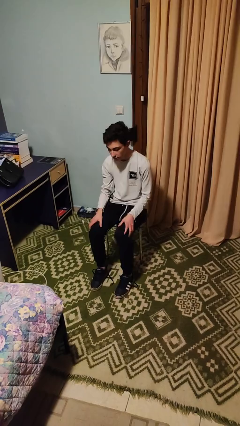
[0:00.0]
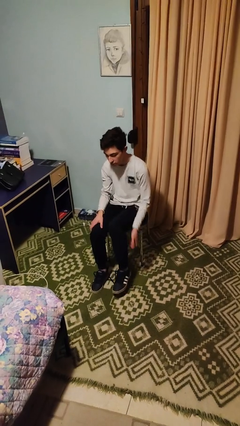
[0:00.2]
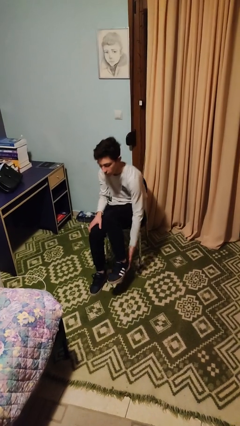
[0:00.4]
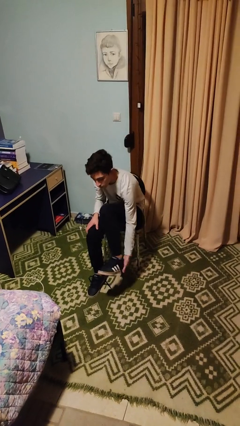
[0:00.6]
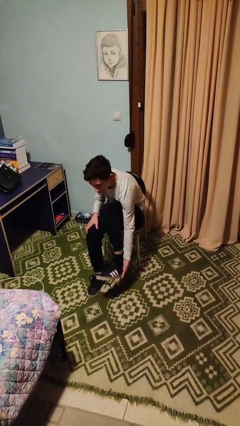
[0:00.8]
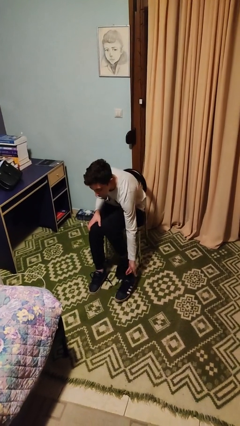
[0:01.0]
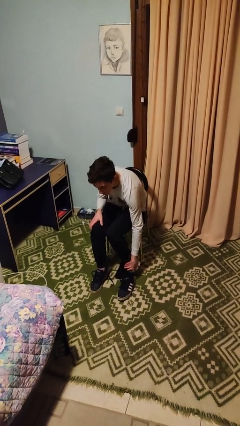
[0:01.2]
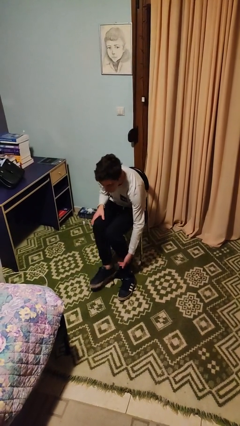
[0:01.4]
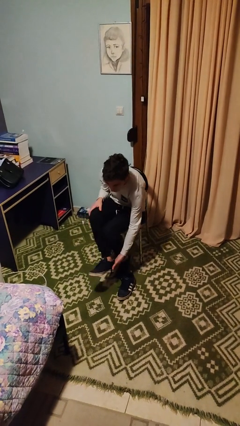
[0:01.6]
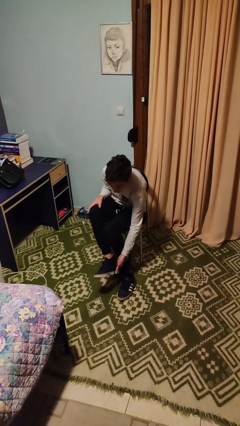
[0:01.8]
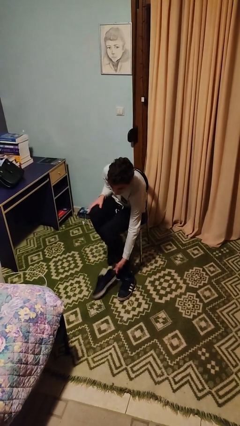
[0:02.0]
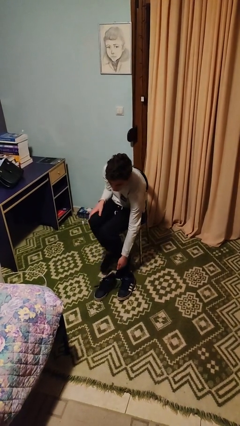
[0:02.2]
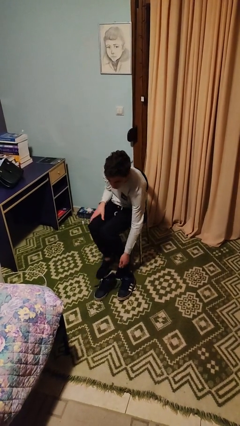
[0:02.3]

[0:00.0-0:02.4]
person takes off shoes

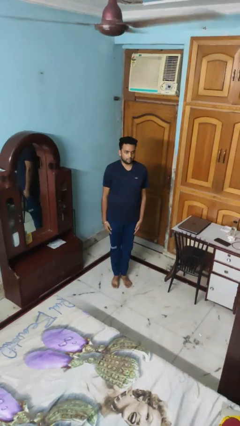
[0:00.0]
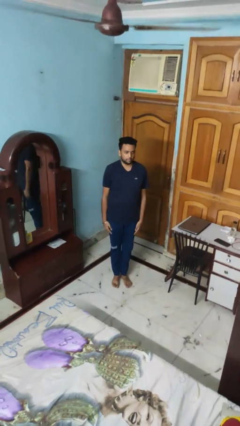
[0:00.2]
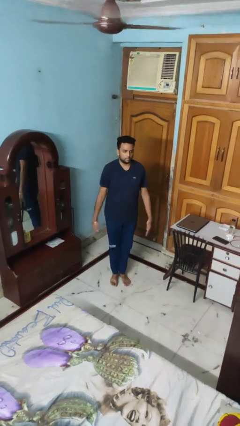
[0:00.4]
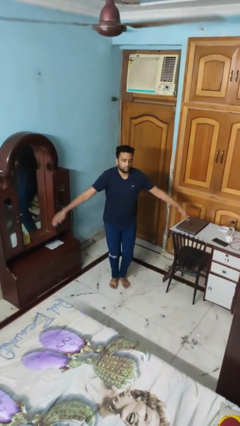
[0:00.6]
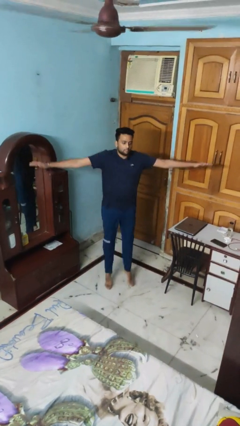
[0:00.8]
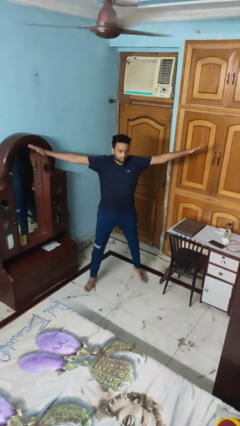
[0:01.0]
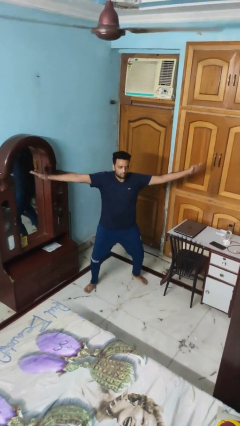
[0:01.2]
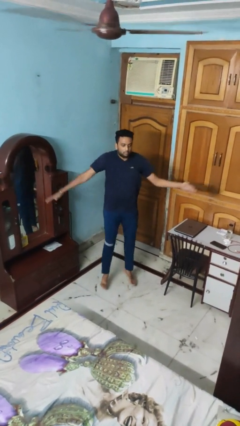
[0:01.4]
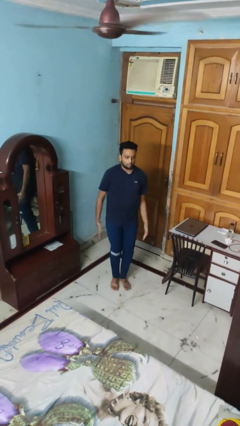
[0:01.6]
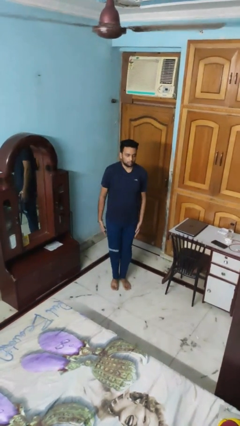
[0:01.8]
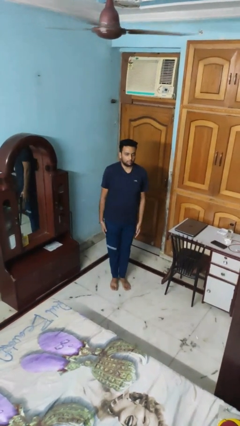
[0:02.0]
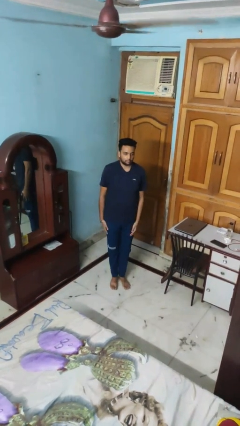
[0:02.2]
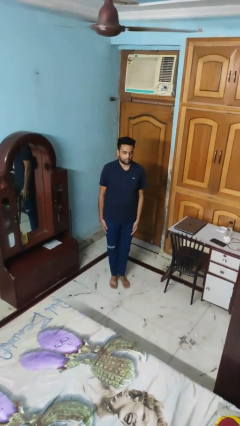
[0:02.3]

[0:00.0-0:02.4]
person exercises with jumping jacks

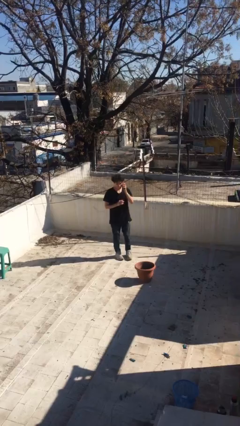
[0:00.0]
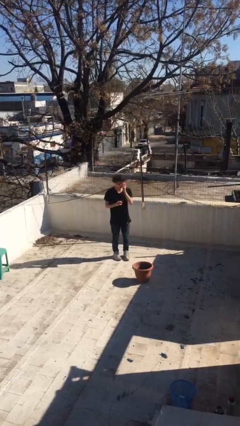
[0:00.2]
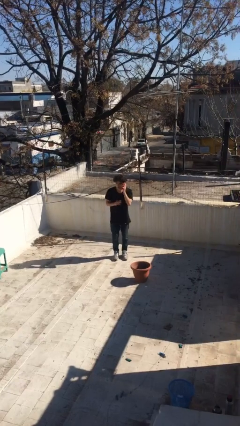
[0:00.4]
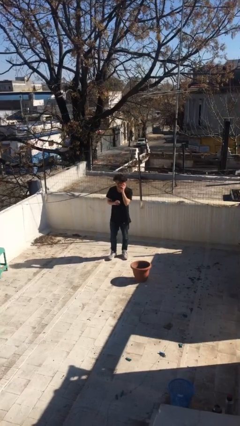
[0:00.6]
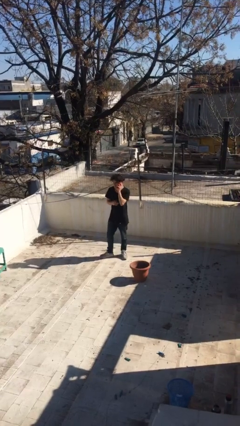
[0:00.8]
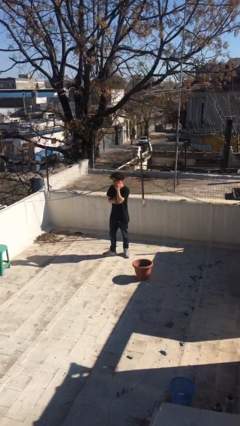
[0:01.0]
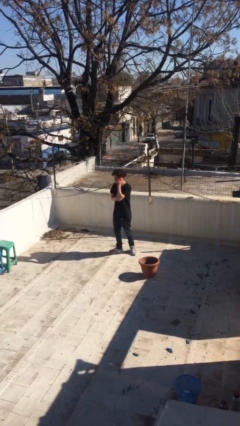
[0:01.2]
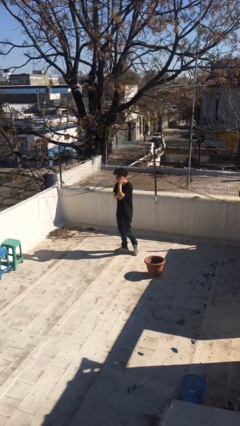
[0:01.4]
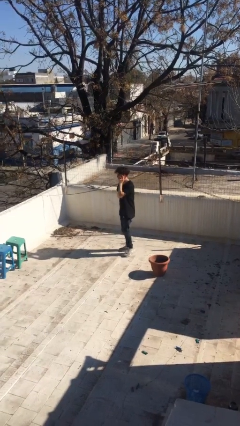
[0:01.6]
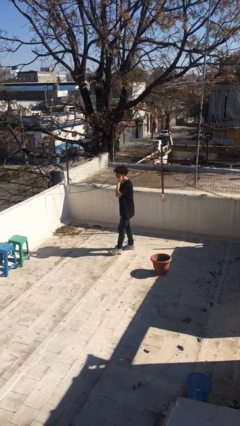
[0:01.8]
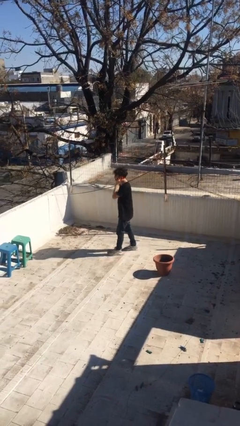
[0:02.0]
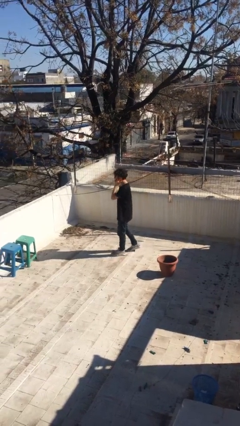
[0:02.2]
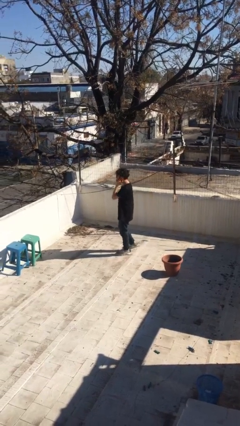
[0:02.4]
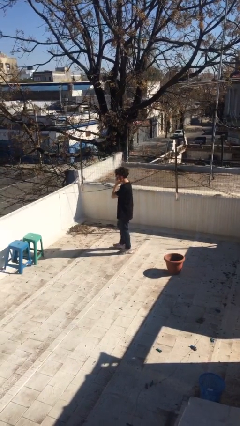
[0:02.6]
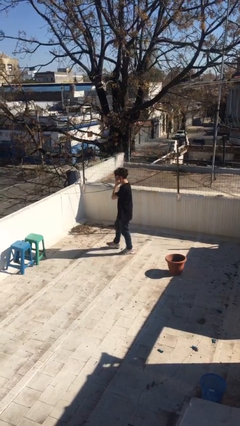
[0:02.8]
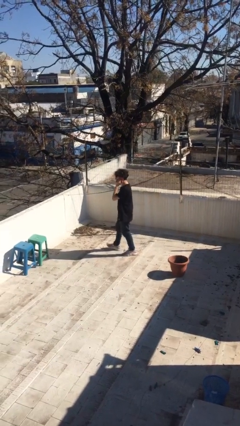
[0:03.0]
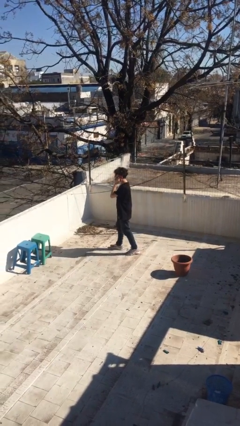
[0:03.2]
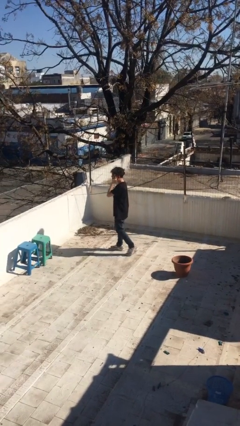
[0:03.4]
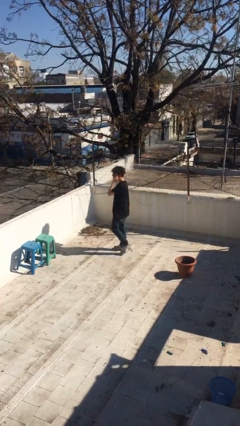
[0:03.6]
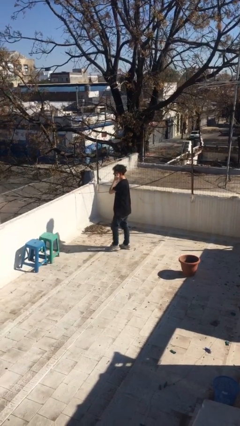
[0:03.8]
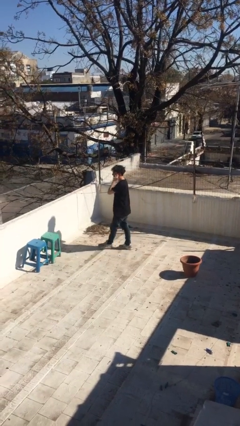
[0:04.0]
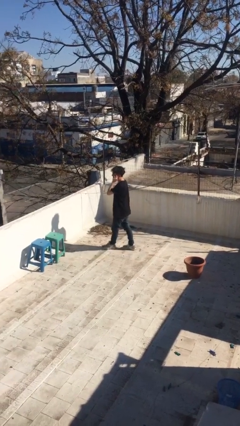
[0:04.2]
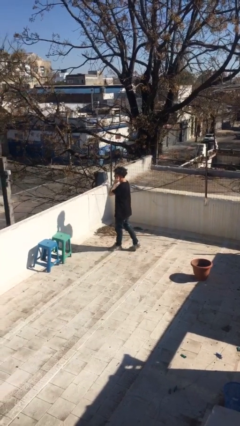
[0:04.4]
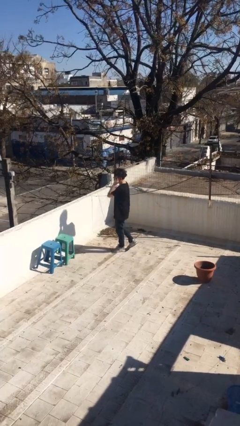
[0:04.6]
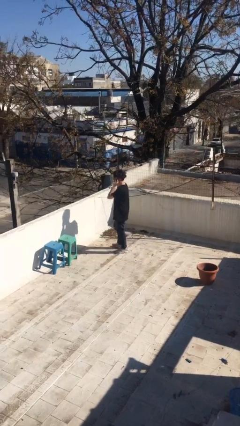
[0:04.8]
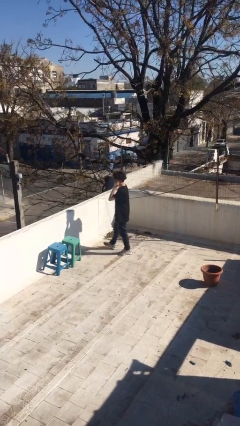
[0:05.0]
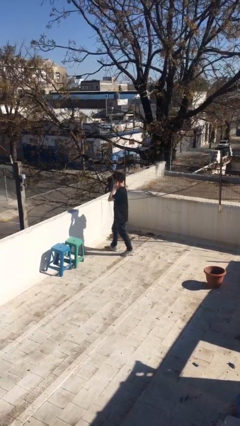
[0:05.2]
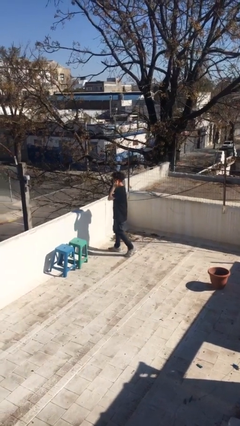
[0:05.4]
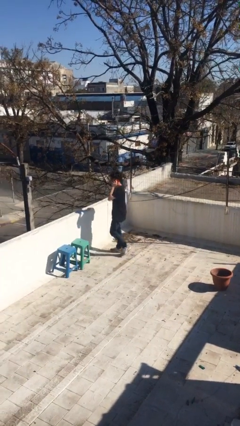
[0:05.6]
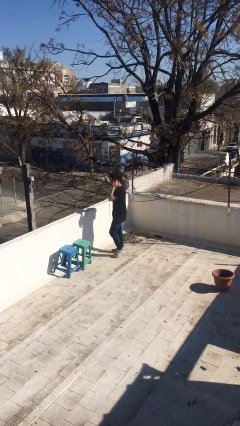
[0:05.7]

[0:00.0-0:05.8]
person talks on phone

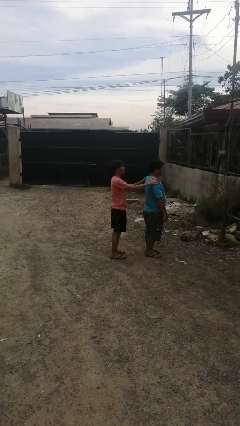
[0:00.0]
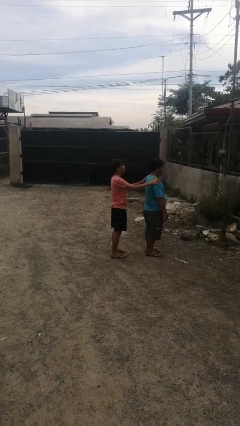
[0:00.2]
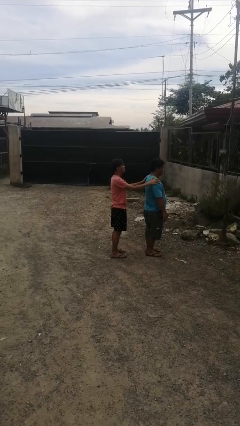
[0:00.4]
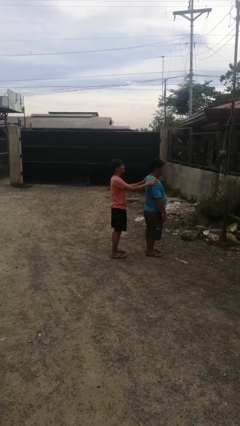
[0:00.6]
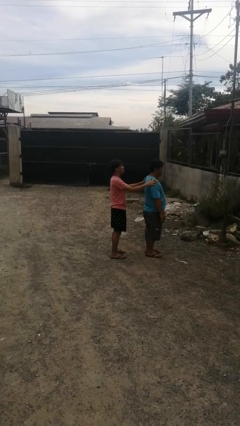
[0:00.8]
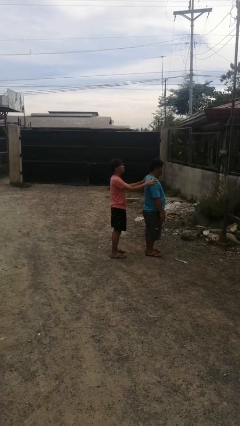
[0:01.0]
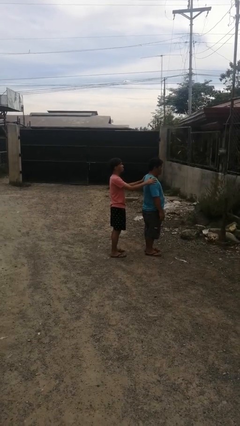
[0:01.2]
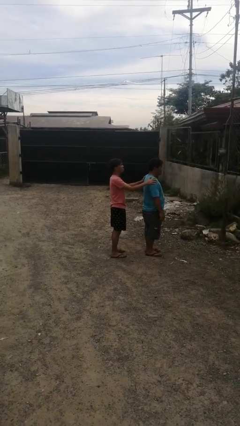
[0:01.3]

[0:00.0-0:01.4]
person grabs person by shoulder

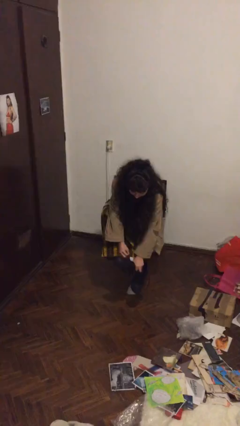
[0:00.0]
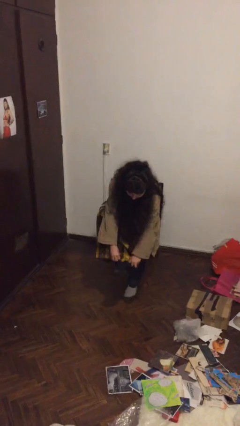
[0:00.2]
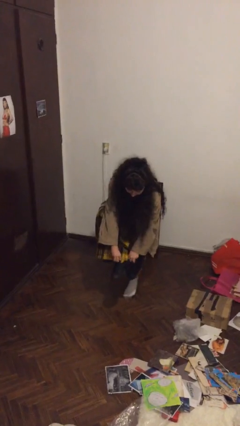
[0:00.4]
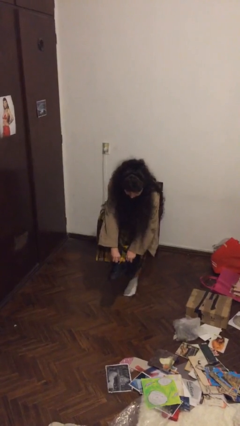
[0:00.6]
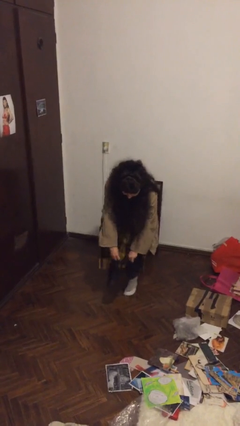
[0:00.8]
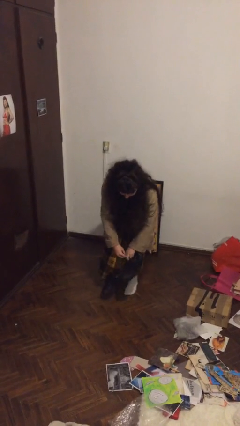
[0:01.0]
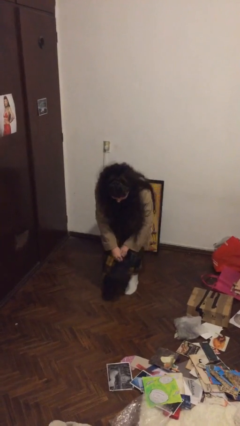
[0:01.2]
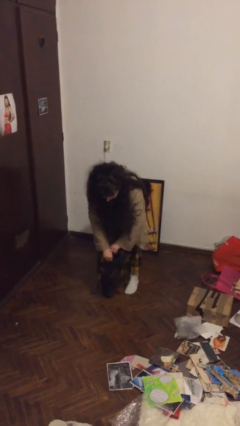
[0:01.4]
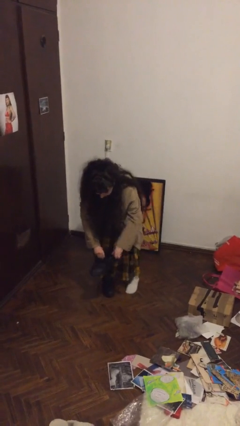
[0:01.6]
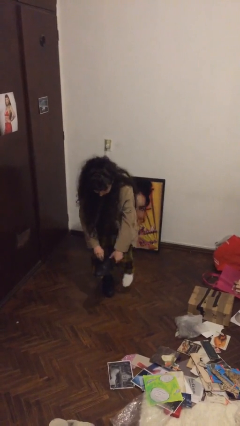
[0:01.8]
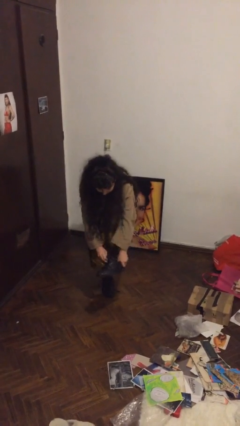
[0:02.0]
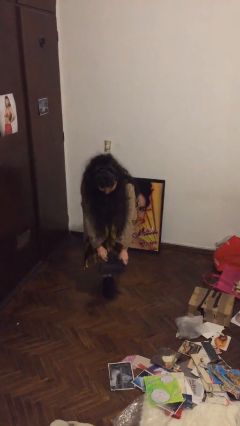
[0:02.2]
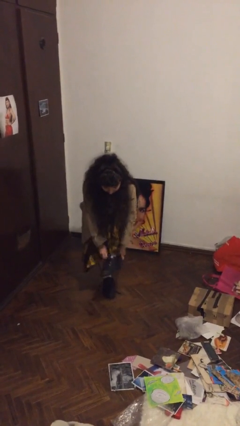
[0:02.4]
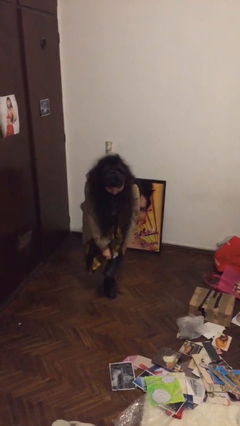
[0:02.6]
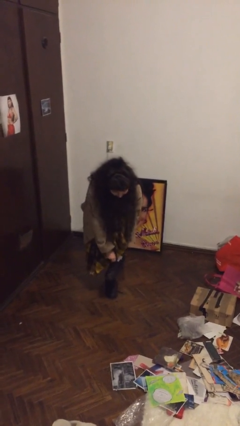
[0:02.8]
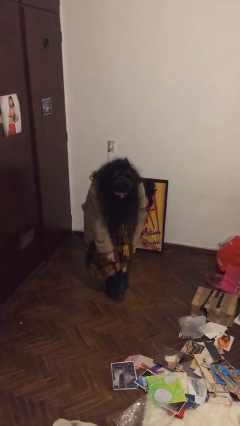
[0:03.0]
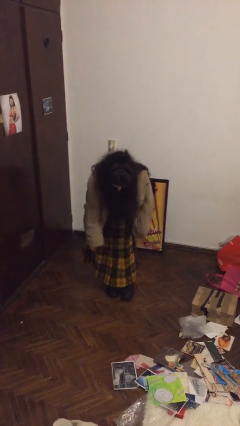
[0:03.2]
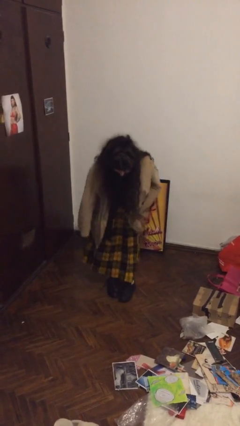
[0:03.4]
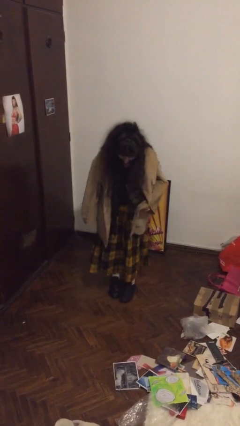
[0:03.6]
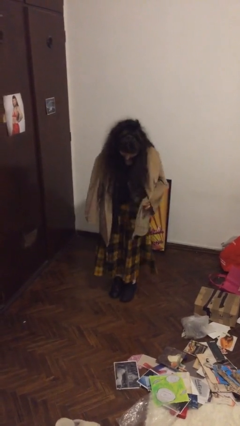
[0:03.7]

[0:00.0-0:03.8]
person puts on shoes

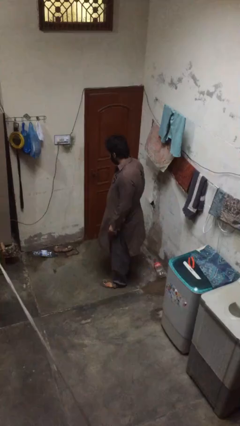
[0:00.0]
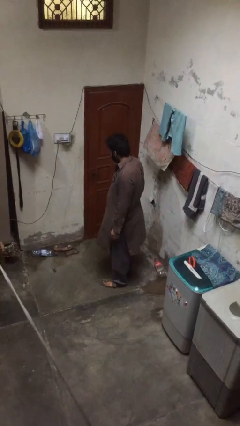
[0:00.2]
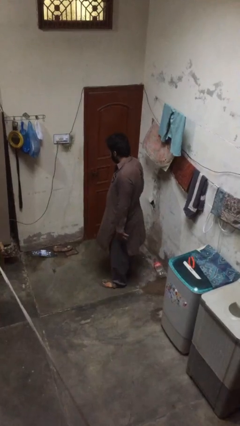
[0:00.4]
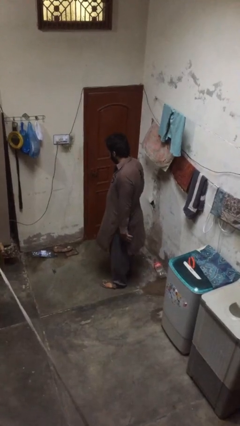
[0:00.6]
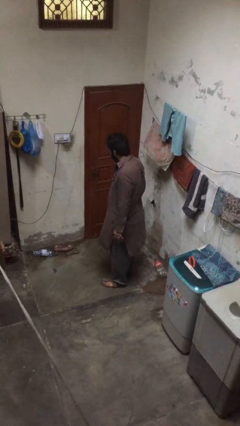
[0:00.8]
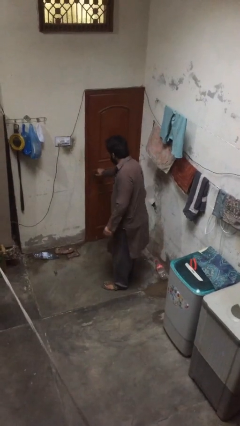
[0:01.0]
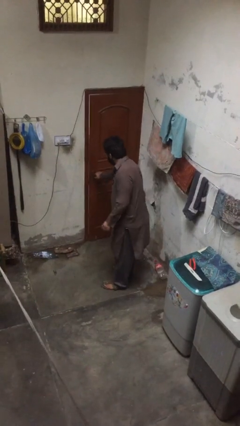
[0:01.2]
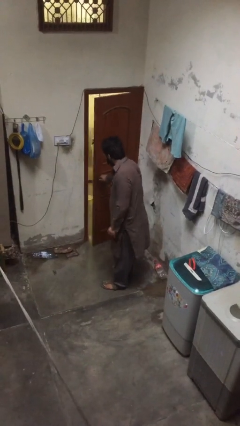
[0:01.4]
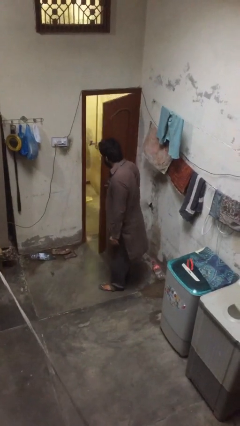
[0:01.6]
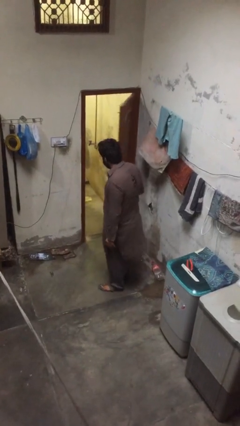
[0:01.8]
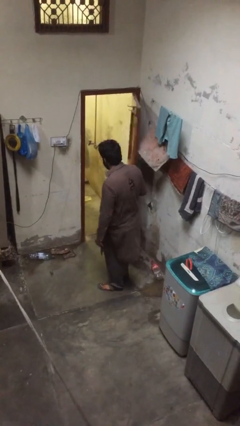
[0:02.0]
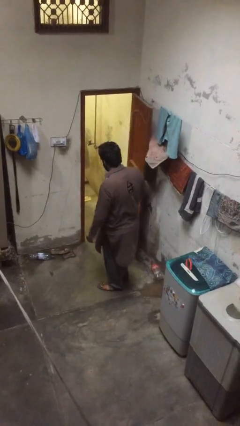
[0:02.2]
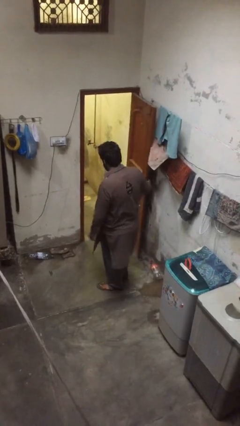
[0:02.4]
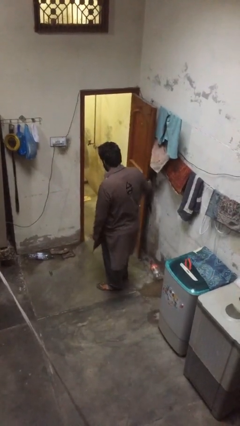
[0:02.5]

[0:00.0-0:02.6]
person opens facility door
